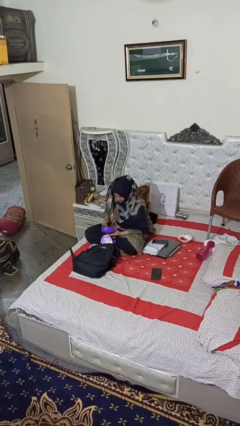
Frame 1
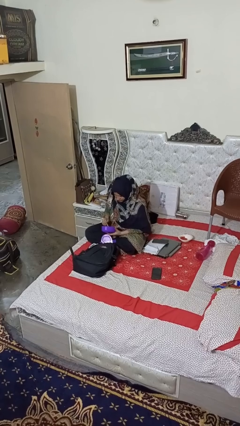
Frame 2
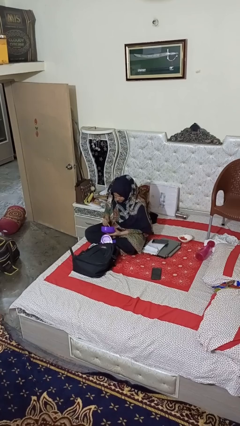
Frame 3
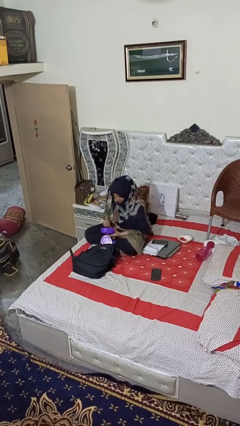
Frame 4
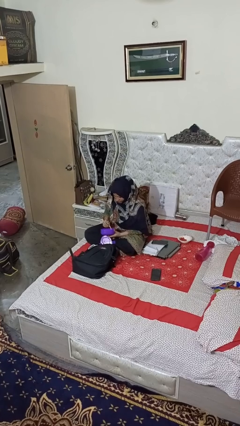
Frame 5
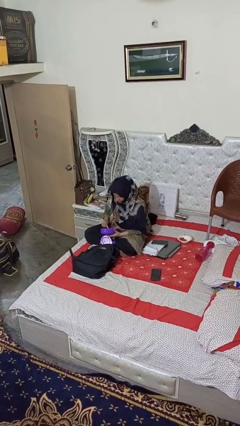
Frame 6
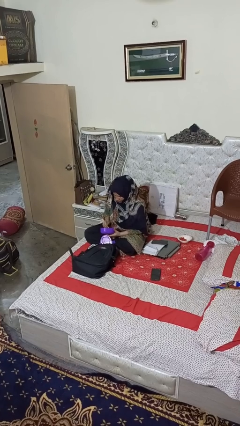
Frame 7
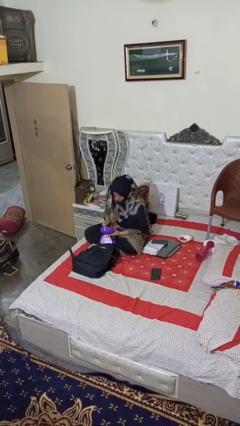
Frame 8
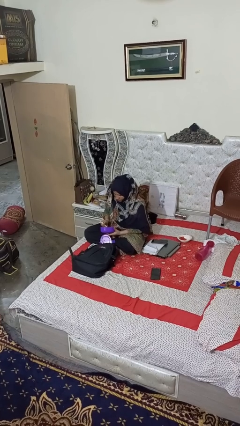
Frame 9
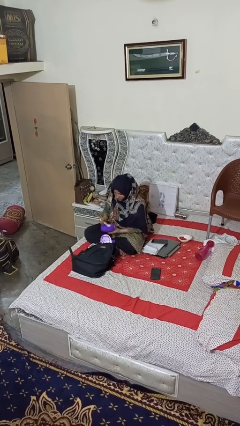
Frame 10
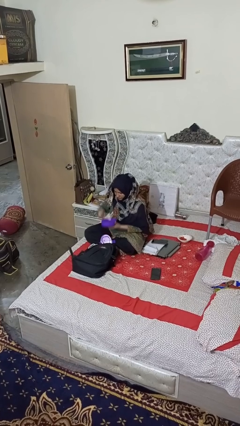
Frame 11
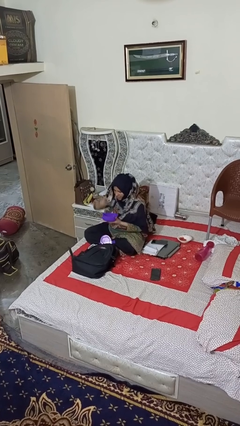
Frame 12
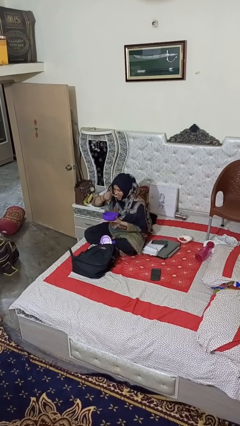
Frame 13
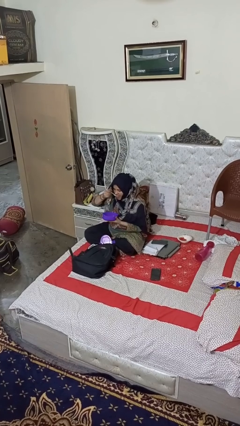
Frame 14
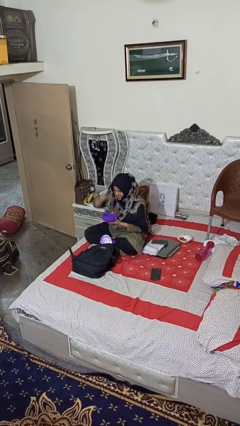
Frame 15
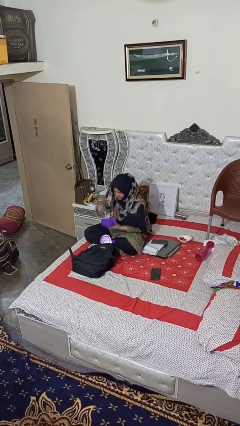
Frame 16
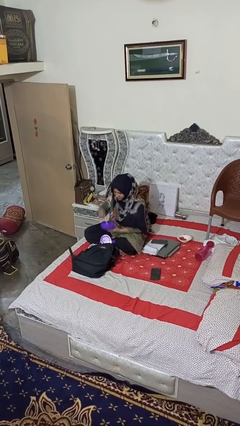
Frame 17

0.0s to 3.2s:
person eats snack from bag

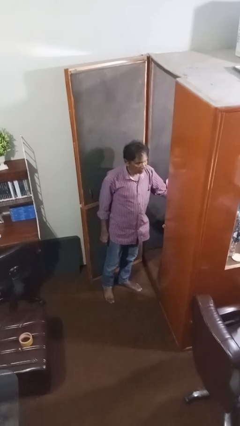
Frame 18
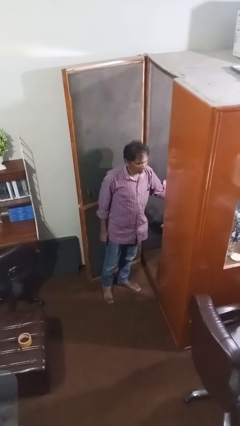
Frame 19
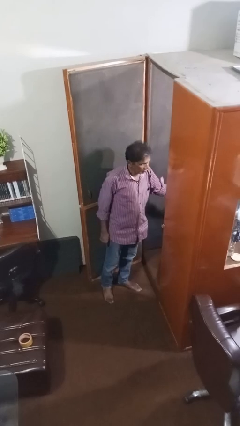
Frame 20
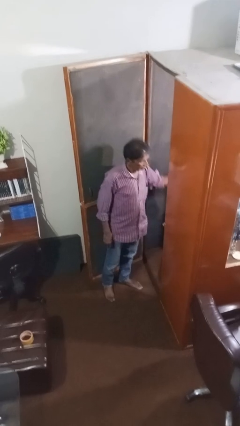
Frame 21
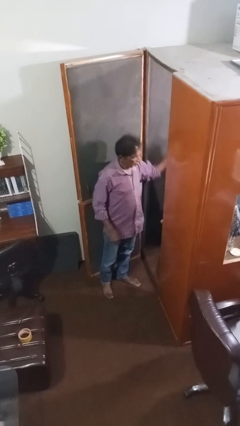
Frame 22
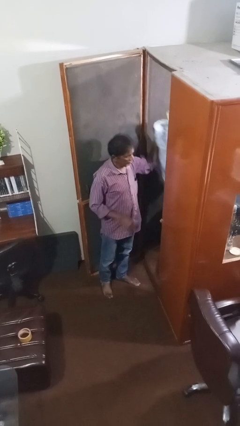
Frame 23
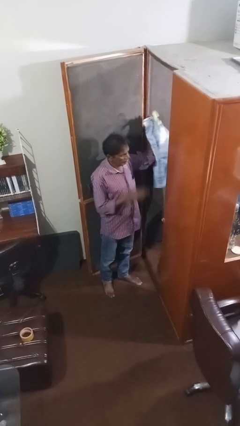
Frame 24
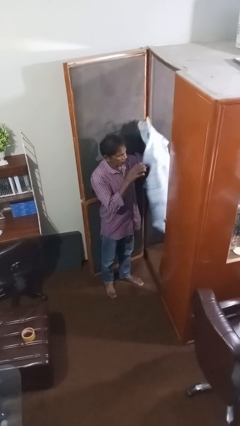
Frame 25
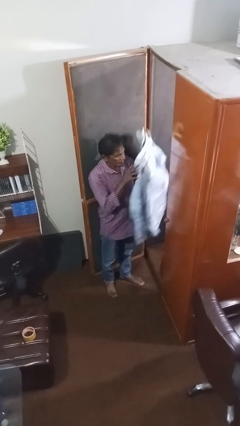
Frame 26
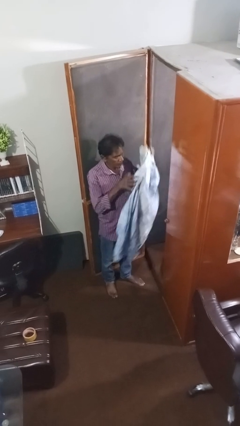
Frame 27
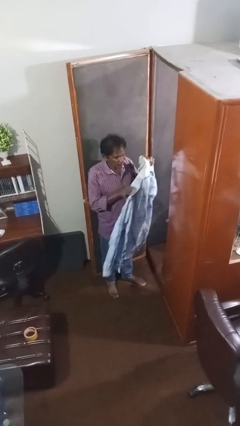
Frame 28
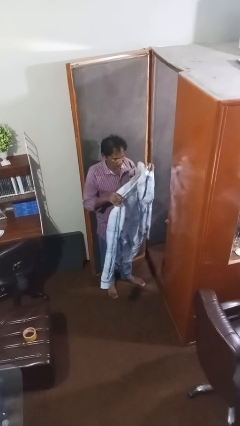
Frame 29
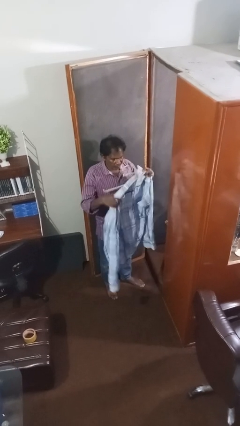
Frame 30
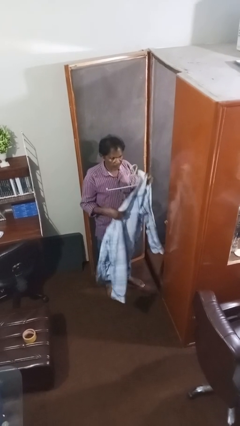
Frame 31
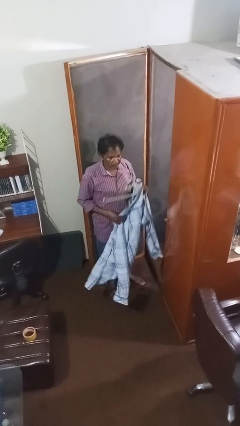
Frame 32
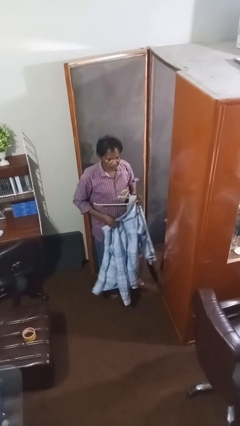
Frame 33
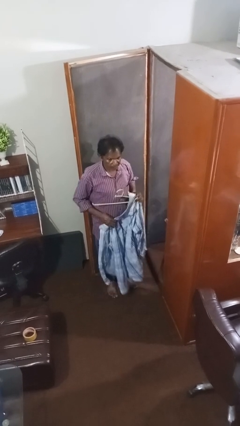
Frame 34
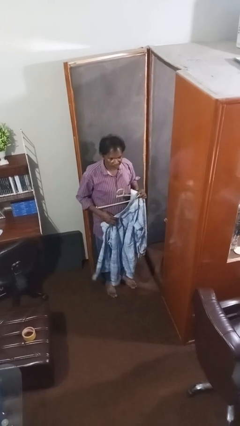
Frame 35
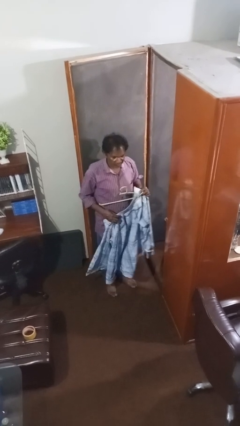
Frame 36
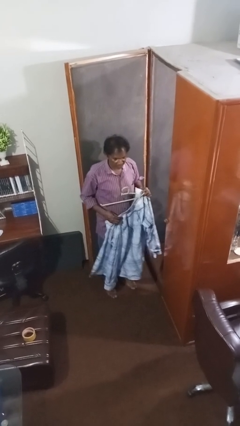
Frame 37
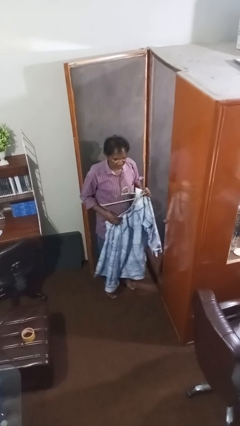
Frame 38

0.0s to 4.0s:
person takes clothes from closet

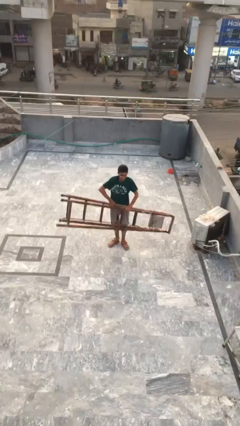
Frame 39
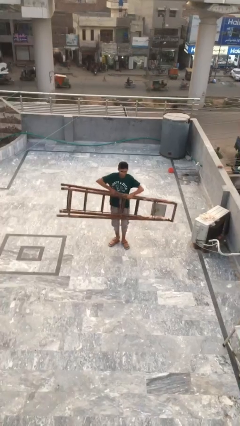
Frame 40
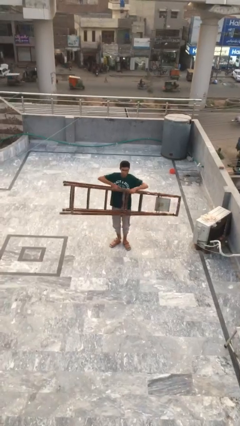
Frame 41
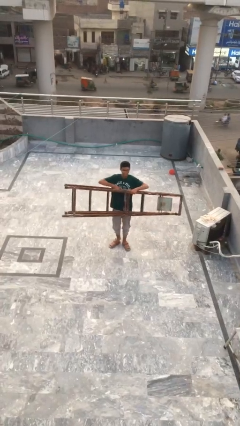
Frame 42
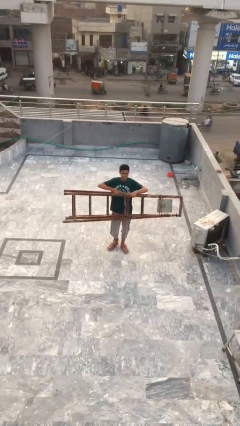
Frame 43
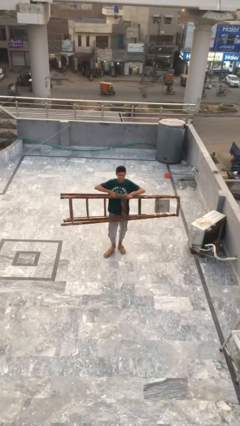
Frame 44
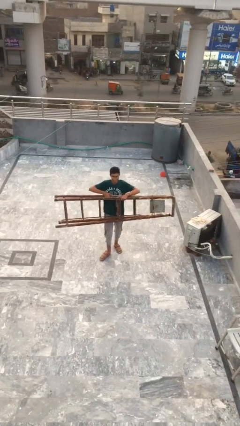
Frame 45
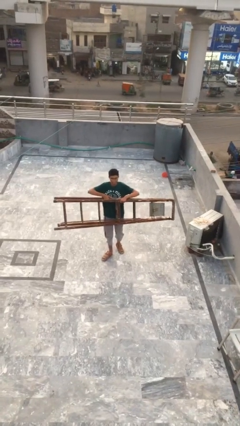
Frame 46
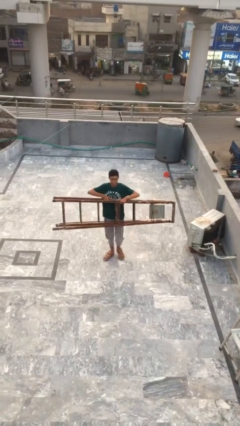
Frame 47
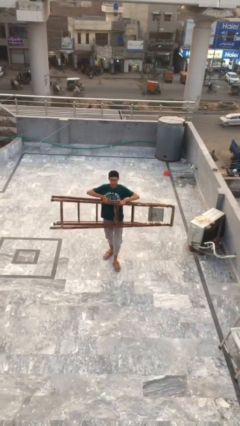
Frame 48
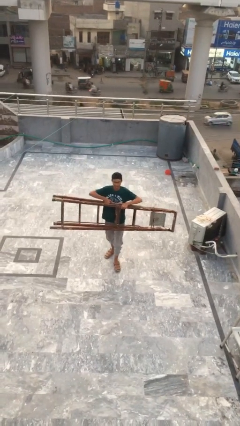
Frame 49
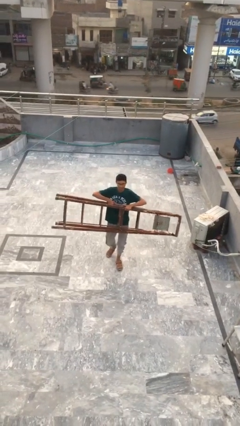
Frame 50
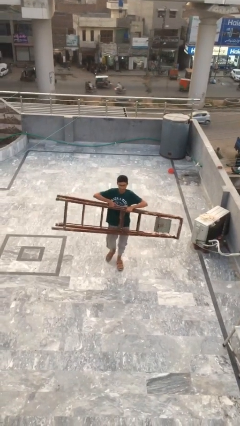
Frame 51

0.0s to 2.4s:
person carries heavy object

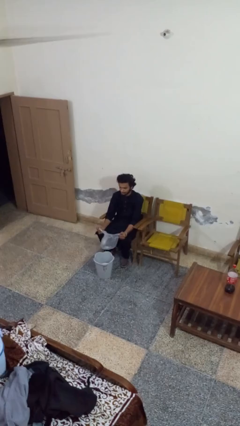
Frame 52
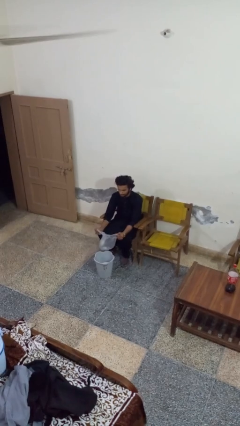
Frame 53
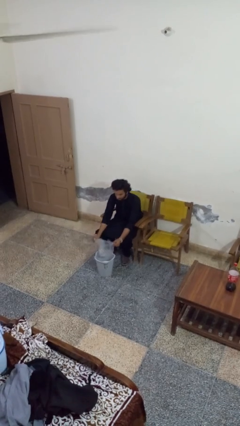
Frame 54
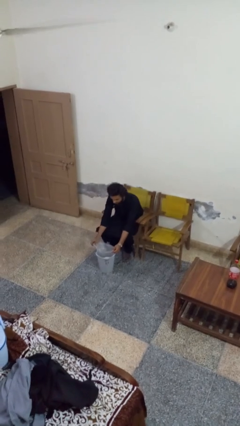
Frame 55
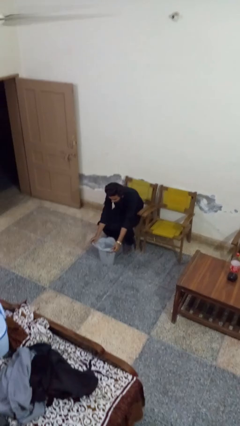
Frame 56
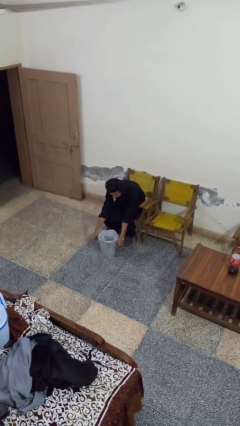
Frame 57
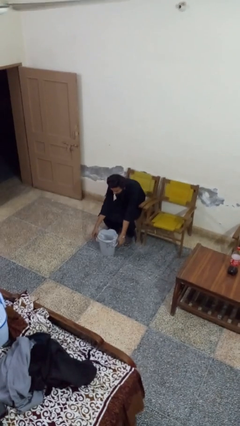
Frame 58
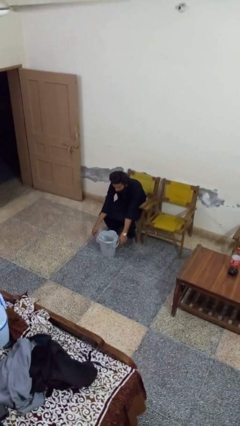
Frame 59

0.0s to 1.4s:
person inserts trashbag into trashcan

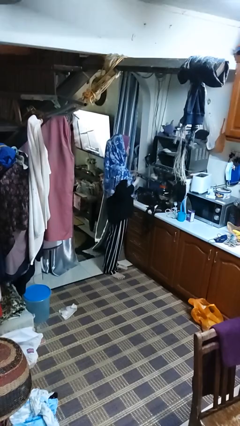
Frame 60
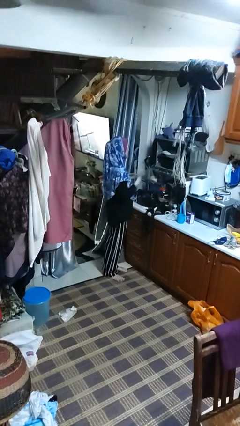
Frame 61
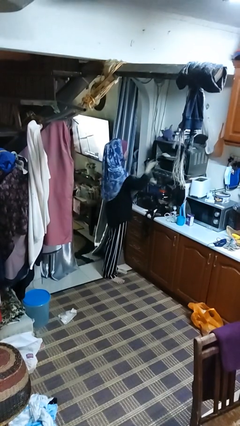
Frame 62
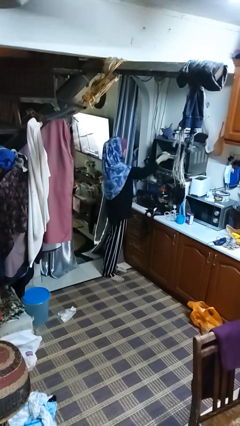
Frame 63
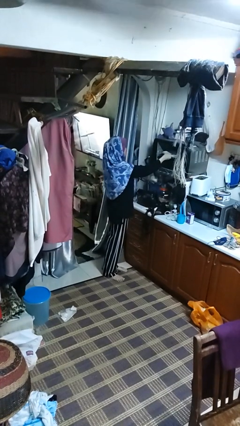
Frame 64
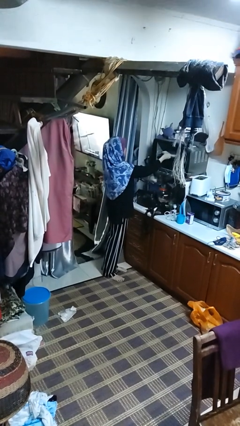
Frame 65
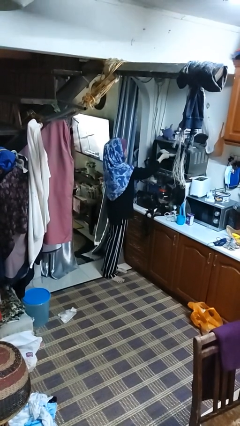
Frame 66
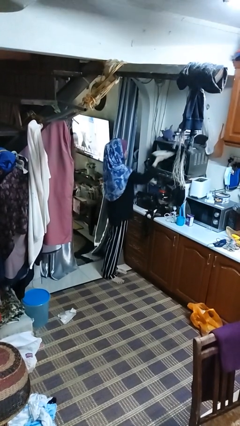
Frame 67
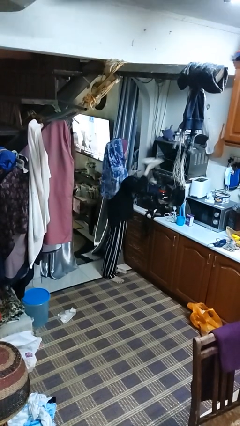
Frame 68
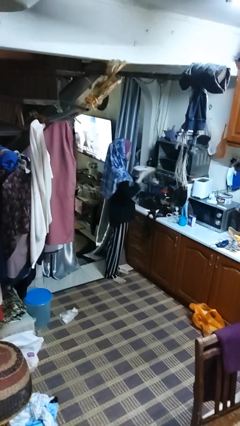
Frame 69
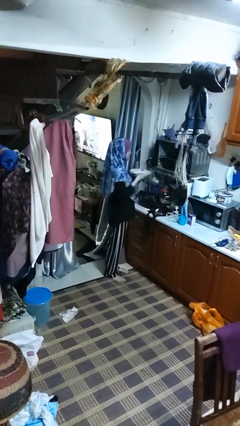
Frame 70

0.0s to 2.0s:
person takes object from oven

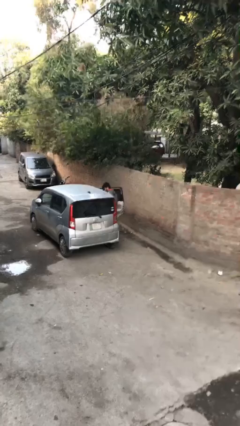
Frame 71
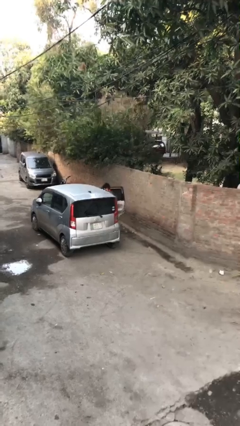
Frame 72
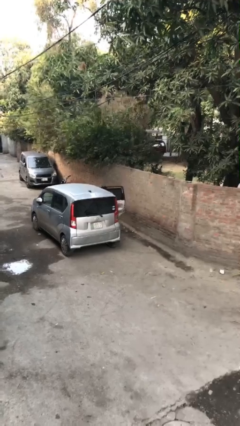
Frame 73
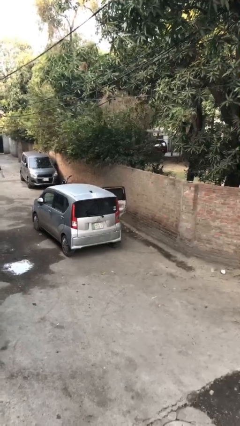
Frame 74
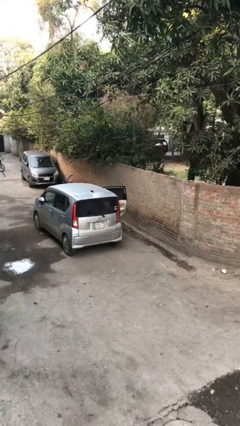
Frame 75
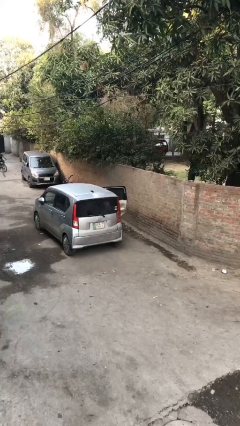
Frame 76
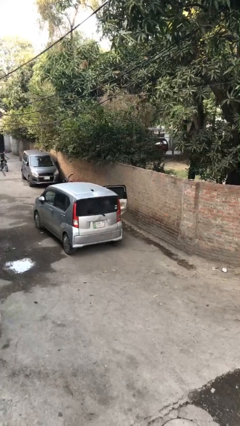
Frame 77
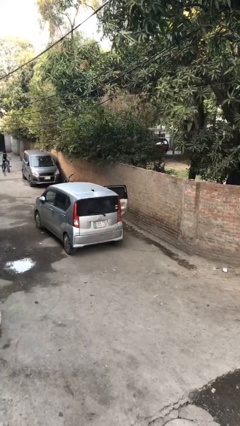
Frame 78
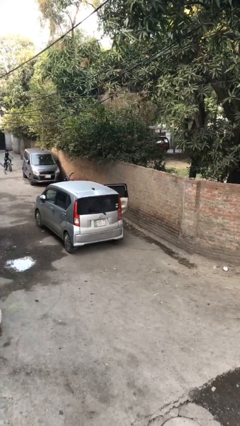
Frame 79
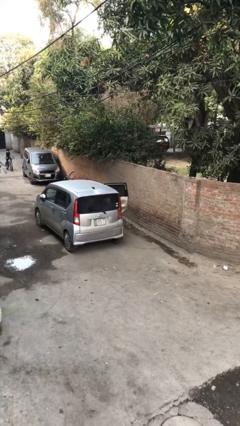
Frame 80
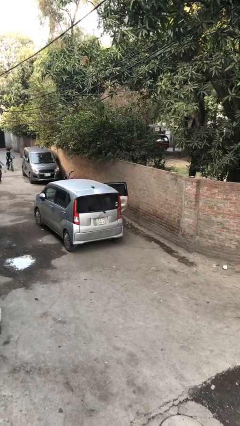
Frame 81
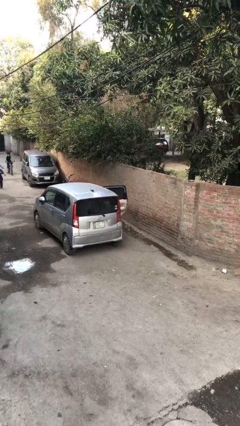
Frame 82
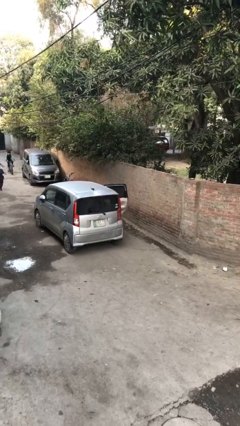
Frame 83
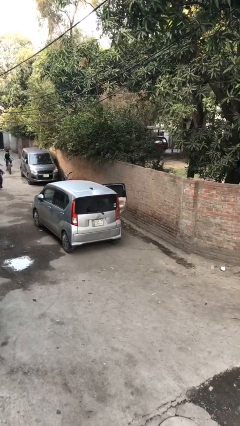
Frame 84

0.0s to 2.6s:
person enters car

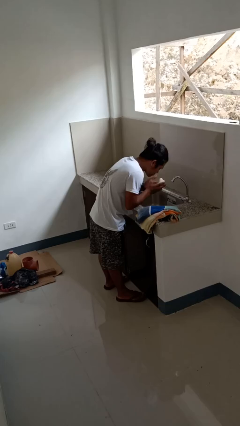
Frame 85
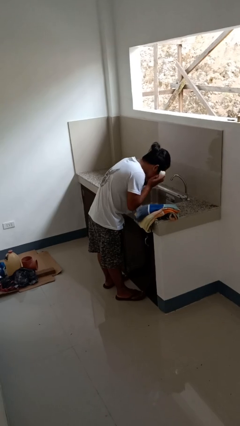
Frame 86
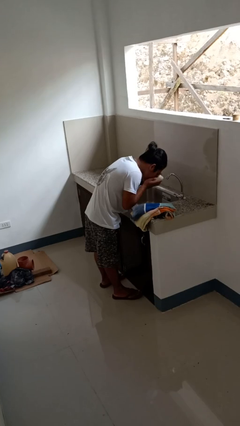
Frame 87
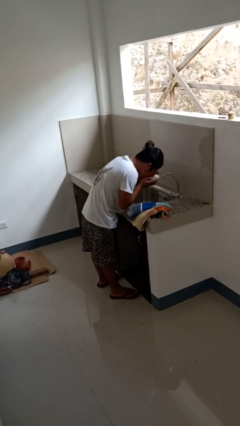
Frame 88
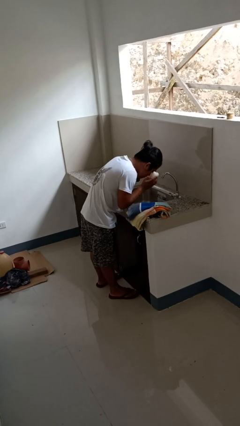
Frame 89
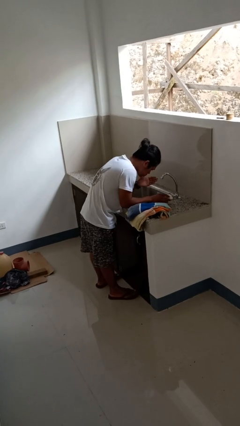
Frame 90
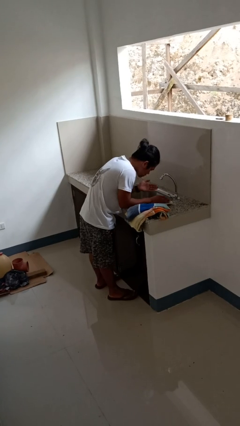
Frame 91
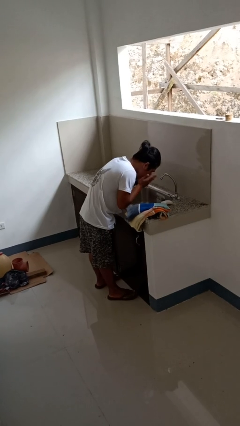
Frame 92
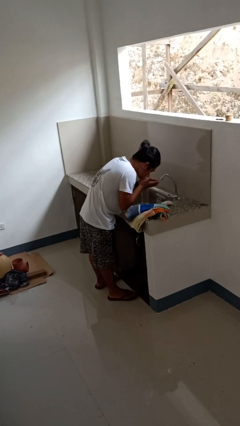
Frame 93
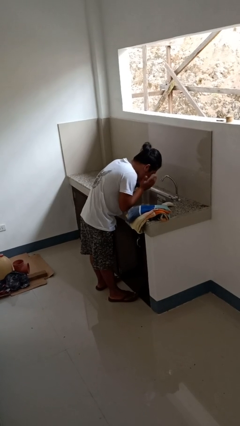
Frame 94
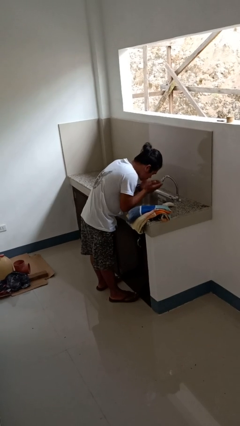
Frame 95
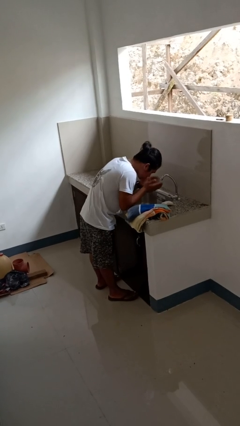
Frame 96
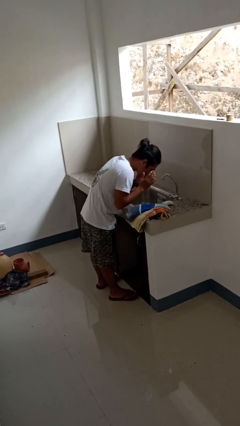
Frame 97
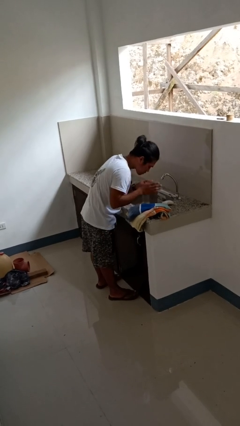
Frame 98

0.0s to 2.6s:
person washes face
